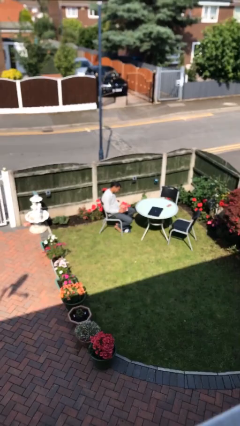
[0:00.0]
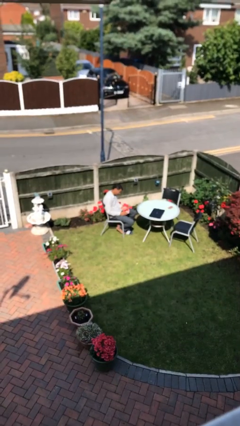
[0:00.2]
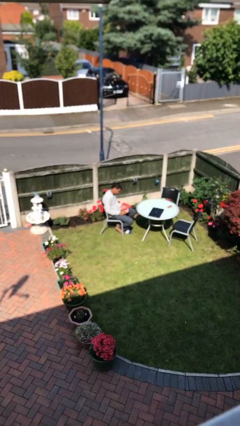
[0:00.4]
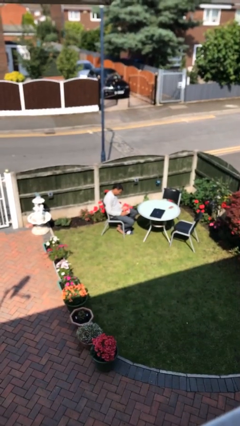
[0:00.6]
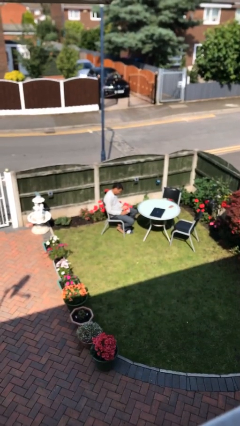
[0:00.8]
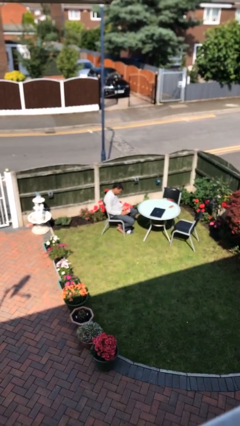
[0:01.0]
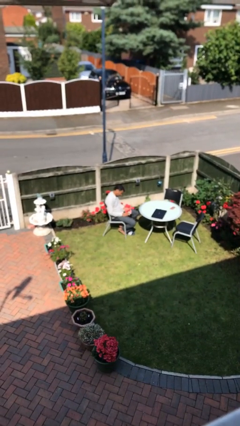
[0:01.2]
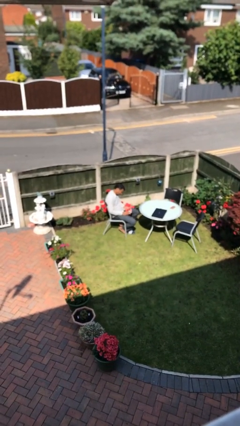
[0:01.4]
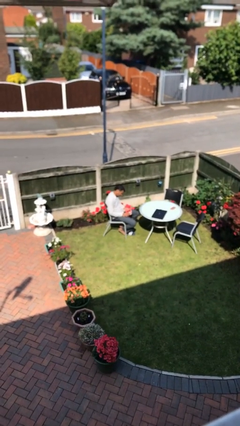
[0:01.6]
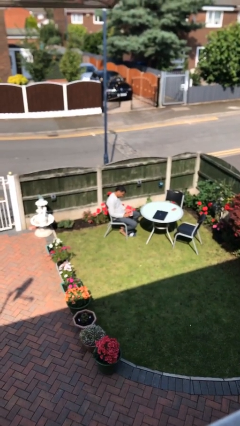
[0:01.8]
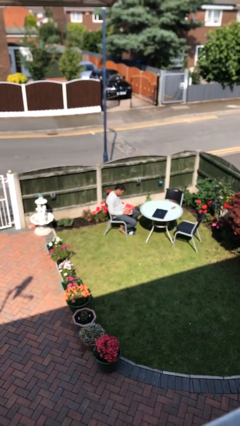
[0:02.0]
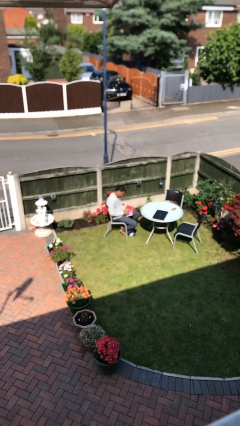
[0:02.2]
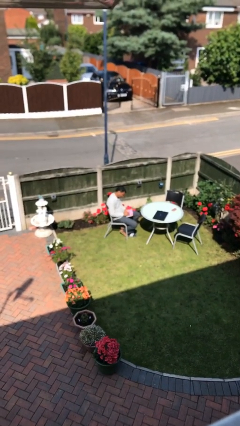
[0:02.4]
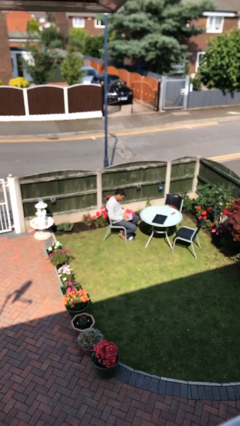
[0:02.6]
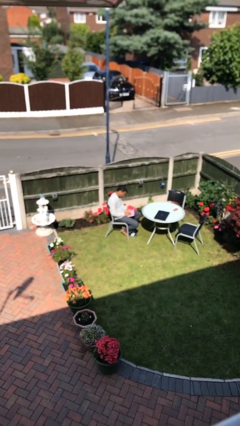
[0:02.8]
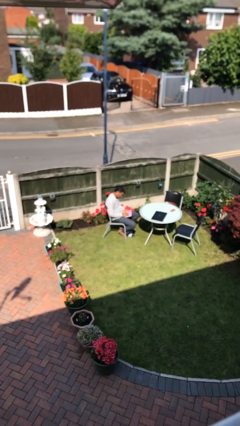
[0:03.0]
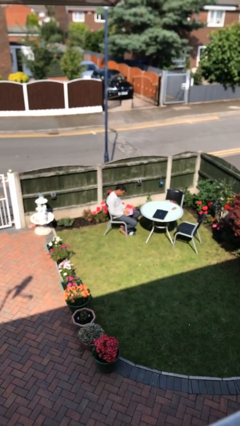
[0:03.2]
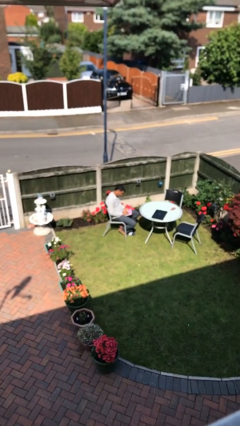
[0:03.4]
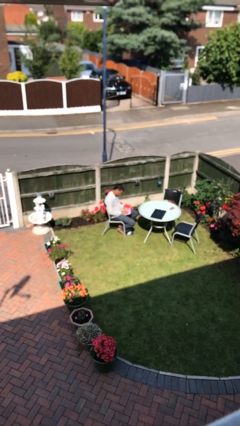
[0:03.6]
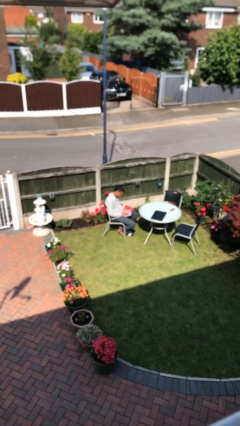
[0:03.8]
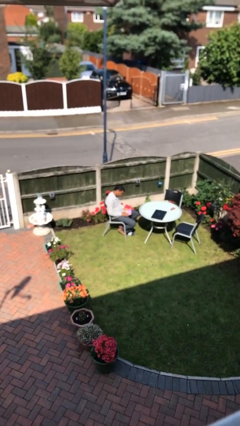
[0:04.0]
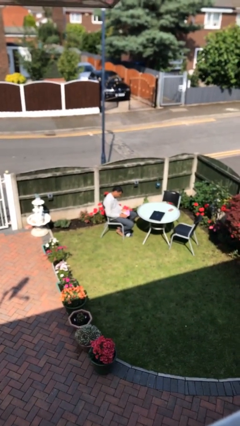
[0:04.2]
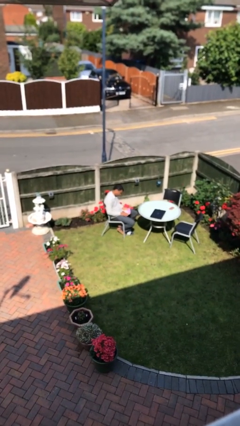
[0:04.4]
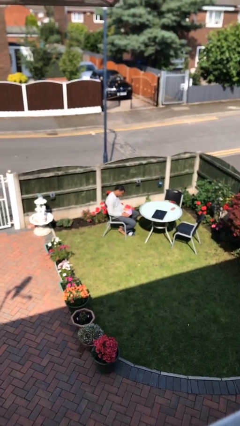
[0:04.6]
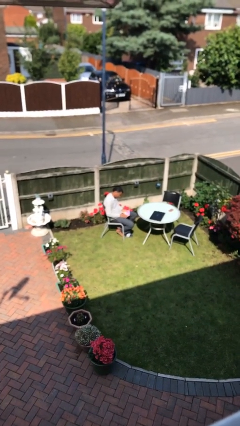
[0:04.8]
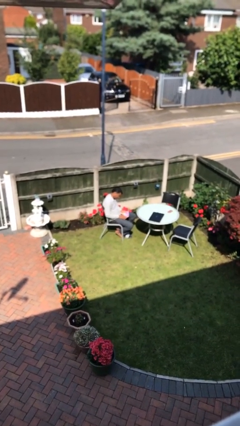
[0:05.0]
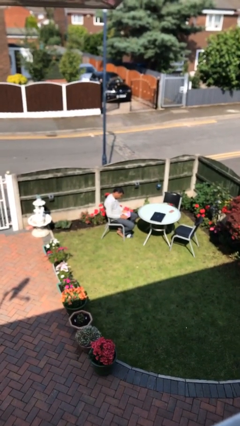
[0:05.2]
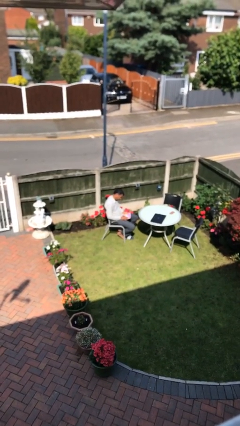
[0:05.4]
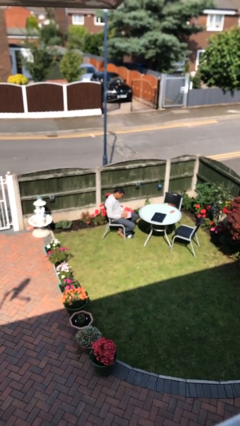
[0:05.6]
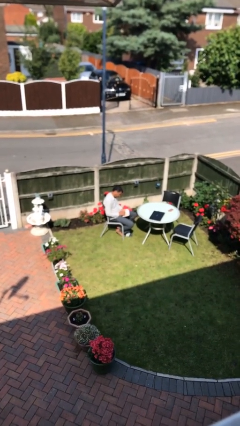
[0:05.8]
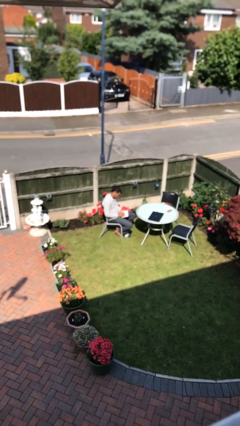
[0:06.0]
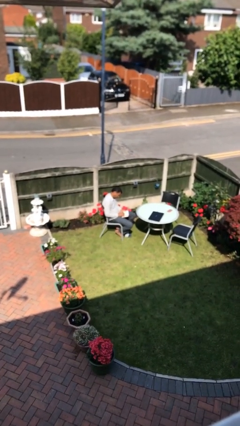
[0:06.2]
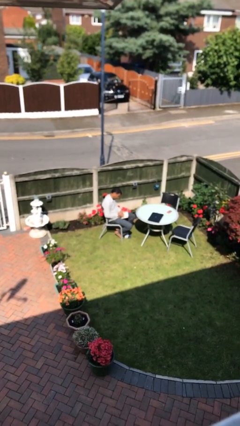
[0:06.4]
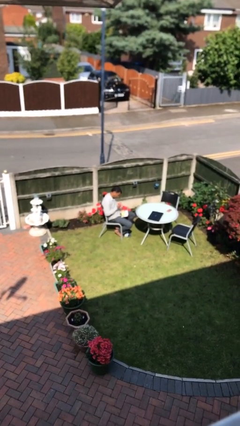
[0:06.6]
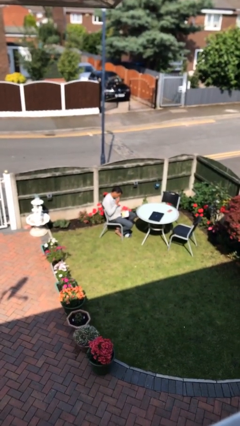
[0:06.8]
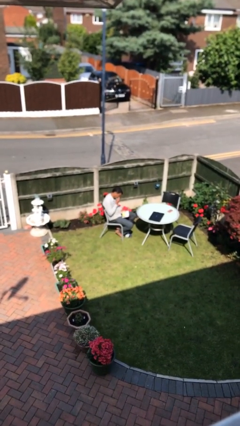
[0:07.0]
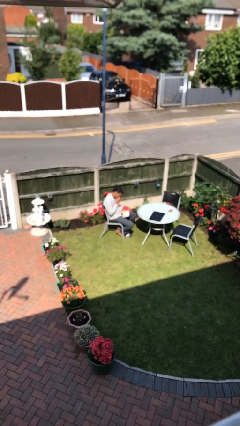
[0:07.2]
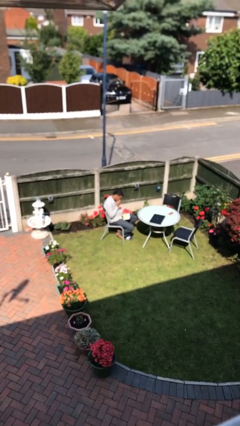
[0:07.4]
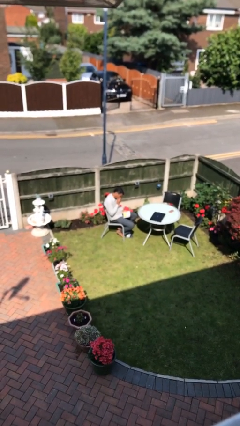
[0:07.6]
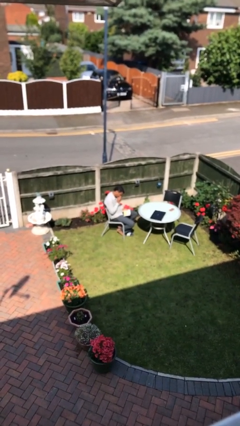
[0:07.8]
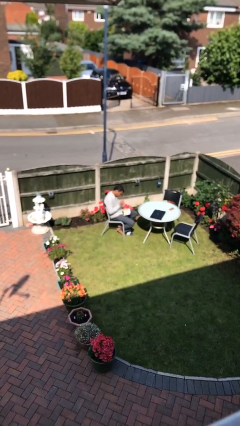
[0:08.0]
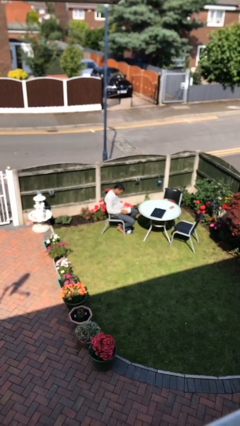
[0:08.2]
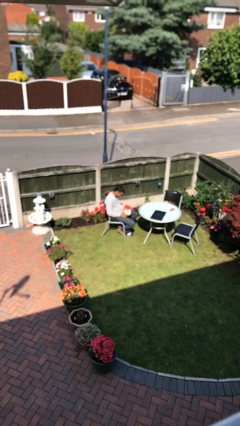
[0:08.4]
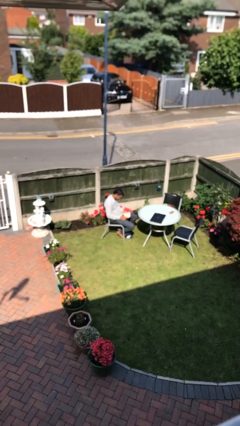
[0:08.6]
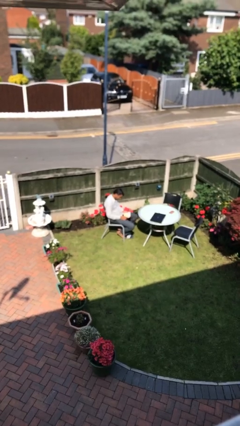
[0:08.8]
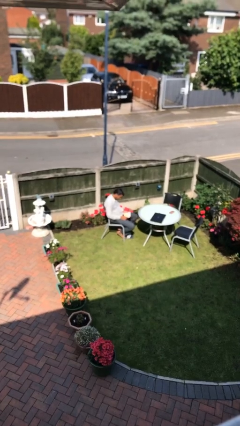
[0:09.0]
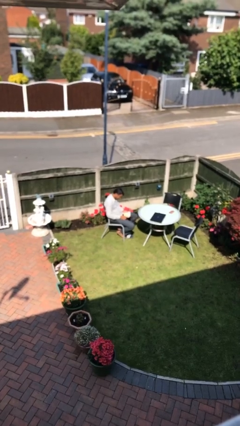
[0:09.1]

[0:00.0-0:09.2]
person reads document

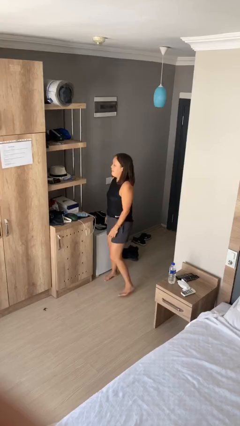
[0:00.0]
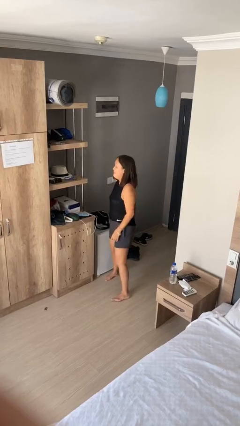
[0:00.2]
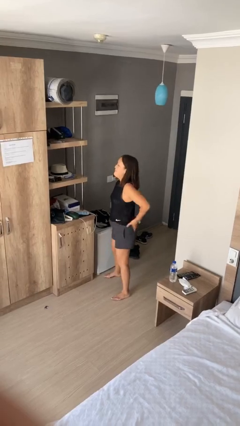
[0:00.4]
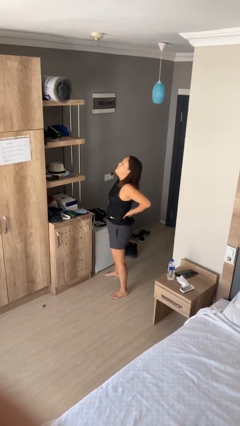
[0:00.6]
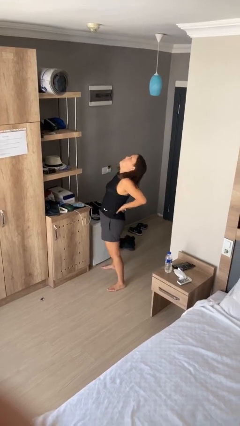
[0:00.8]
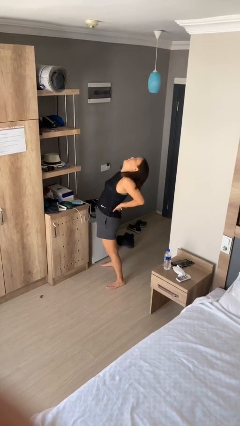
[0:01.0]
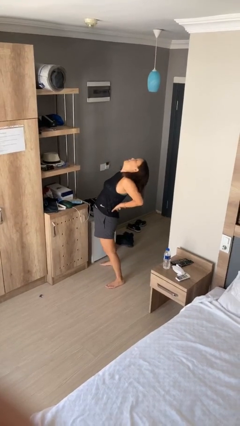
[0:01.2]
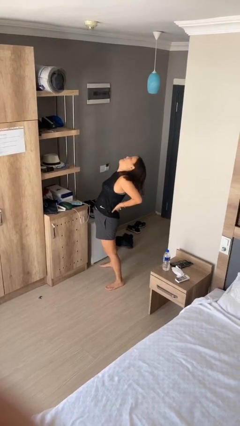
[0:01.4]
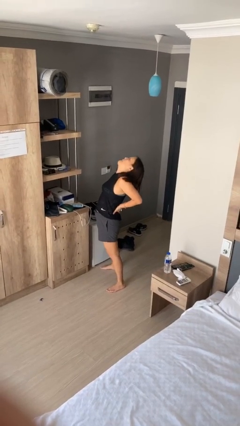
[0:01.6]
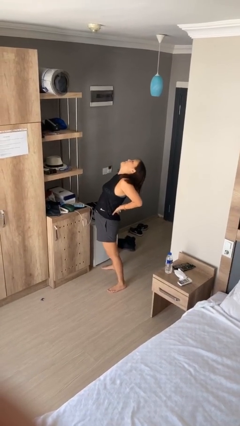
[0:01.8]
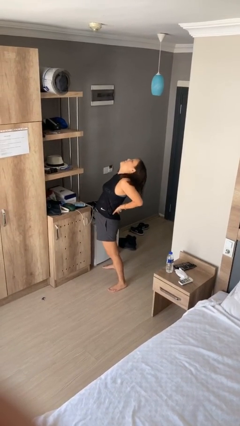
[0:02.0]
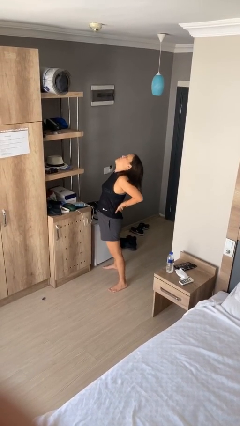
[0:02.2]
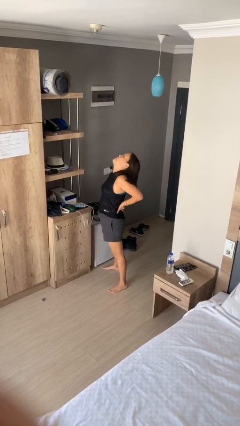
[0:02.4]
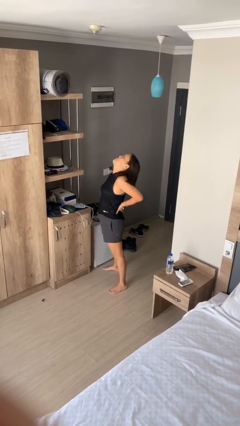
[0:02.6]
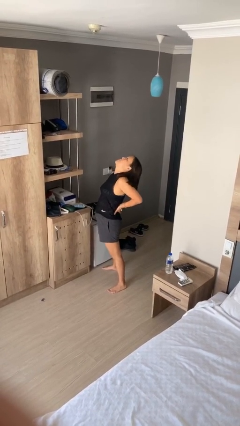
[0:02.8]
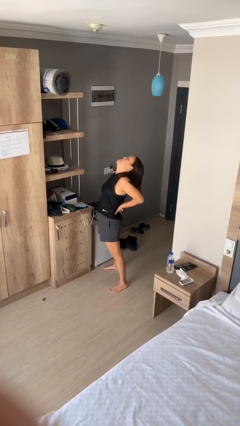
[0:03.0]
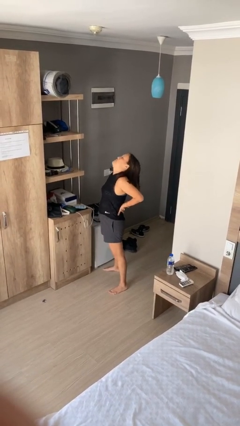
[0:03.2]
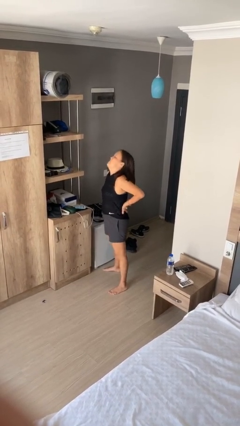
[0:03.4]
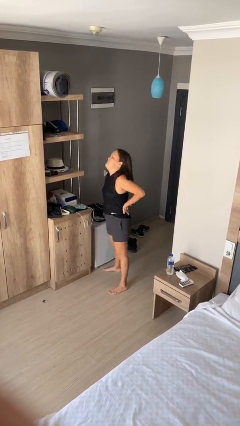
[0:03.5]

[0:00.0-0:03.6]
person stretches back

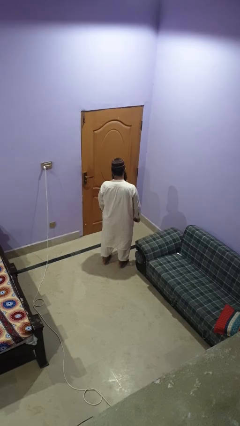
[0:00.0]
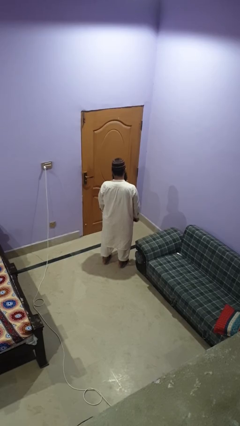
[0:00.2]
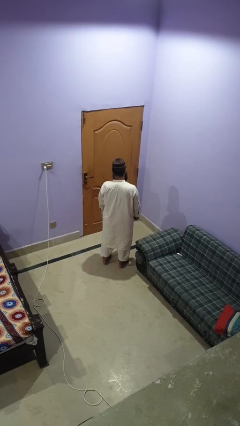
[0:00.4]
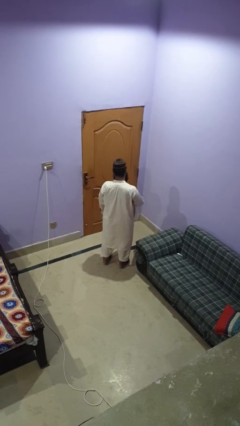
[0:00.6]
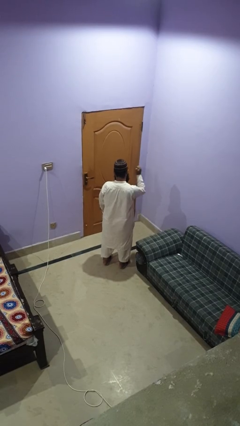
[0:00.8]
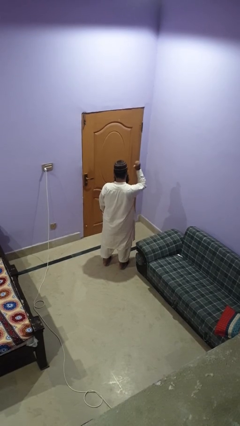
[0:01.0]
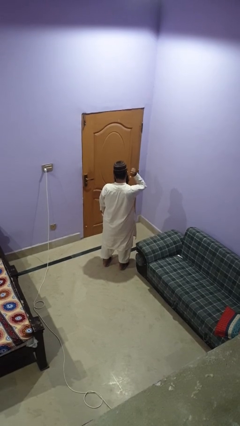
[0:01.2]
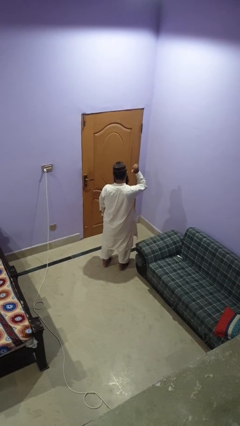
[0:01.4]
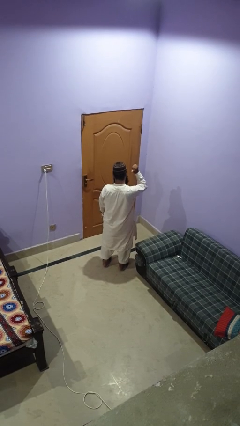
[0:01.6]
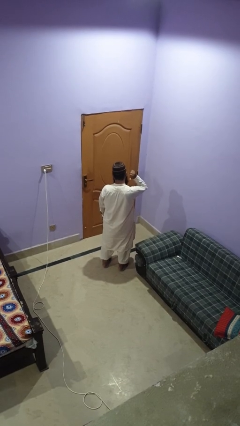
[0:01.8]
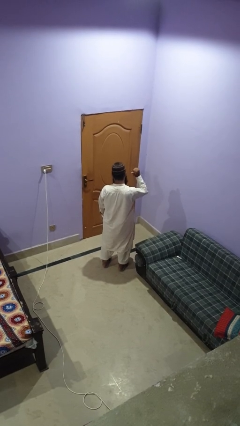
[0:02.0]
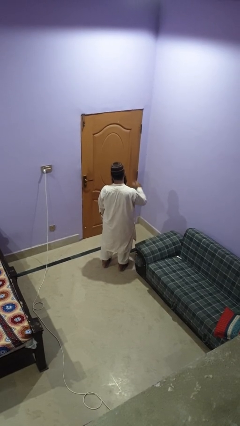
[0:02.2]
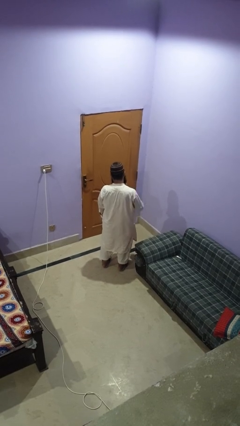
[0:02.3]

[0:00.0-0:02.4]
person gestures behind me

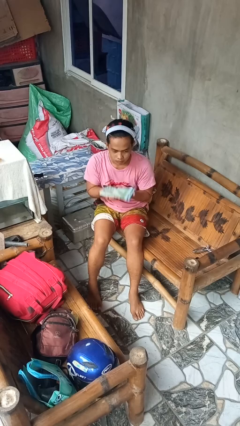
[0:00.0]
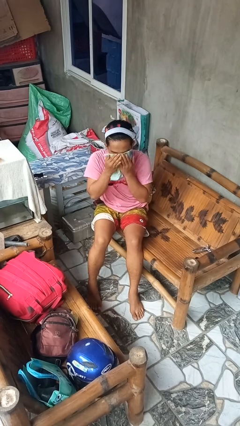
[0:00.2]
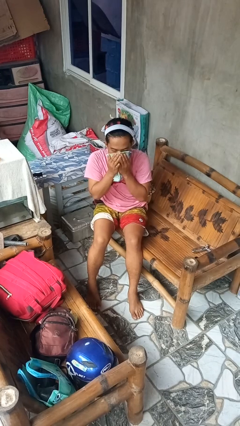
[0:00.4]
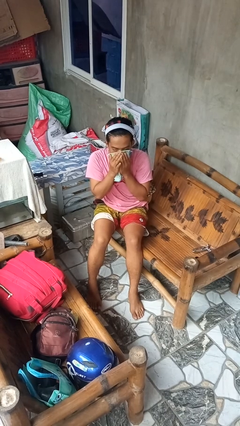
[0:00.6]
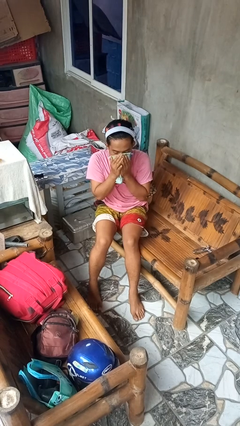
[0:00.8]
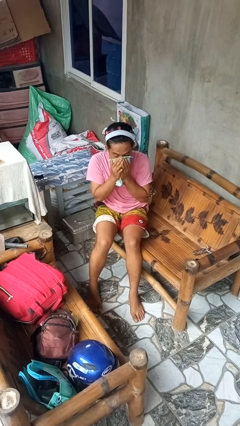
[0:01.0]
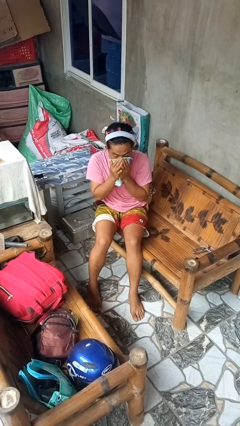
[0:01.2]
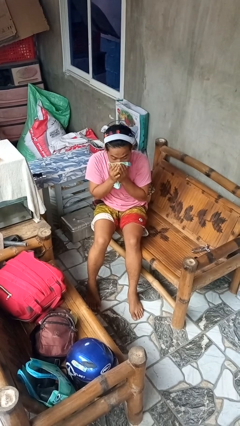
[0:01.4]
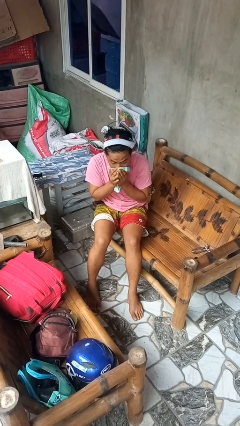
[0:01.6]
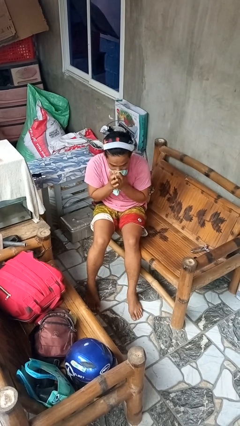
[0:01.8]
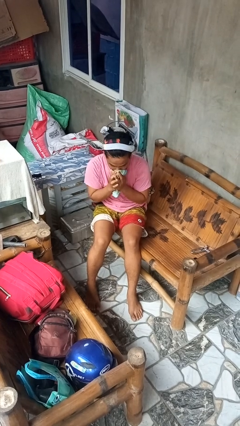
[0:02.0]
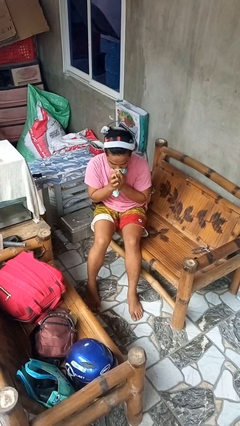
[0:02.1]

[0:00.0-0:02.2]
person blows nose
